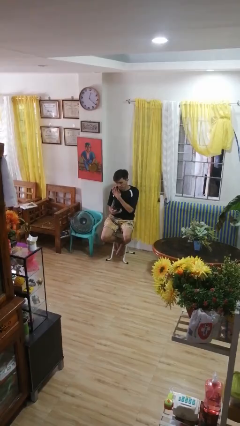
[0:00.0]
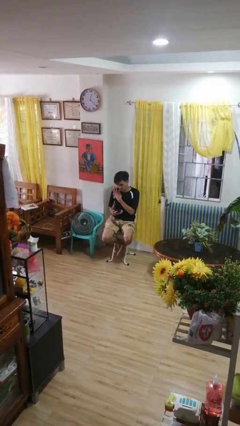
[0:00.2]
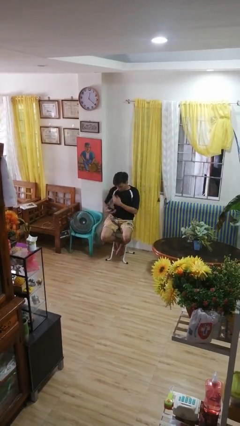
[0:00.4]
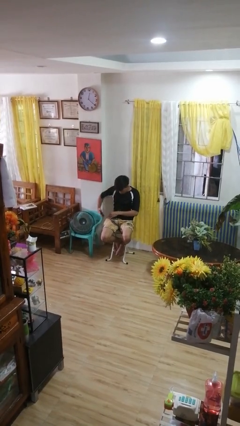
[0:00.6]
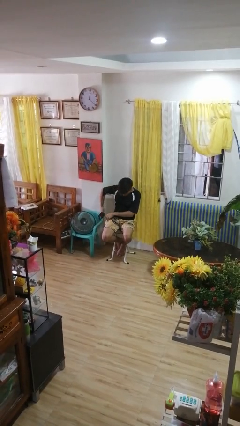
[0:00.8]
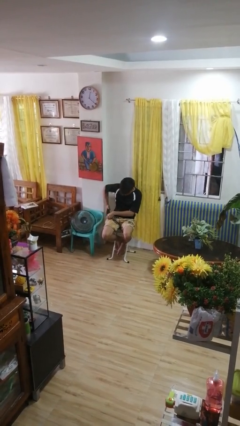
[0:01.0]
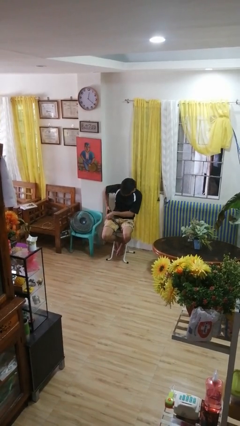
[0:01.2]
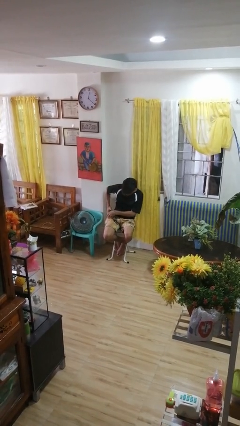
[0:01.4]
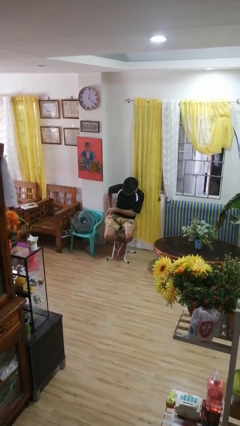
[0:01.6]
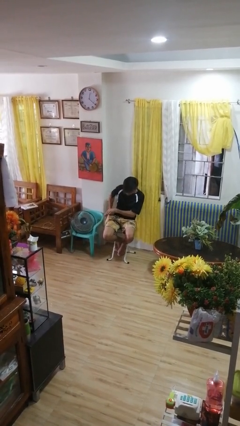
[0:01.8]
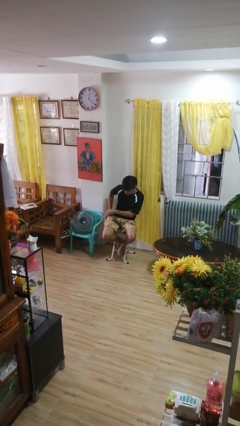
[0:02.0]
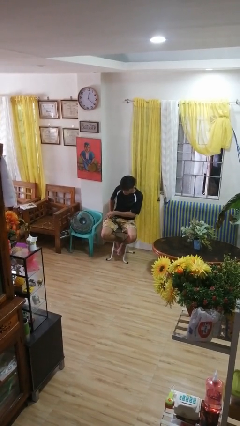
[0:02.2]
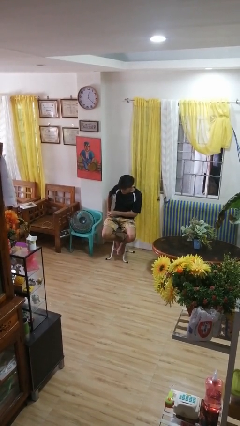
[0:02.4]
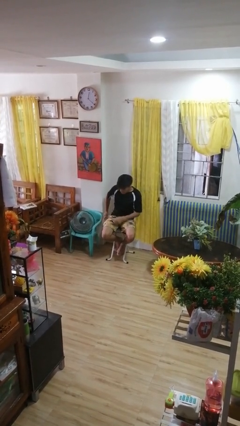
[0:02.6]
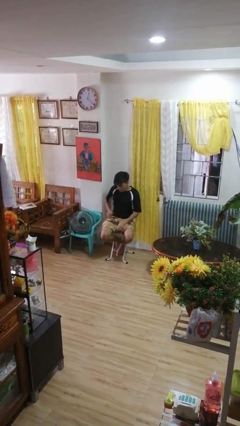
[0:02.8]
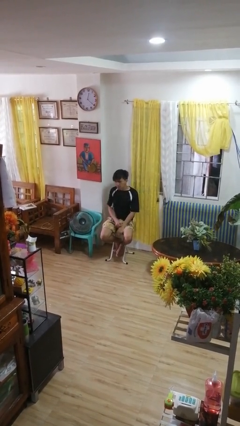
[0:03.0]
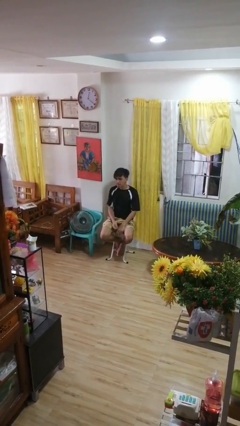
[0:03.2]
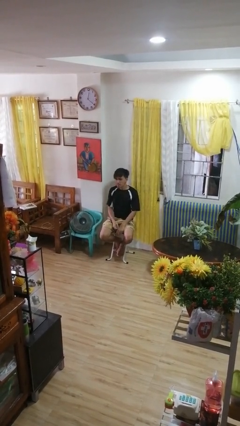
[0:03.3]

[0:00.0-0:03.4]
person puts phone into pocket

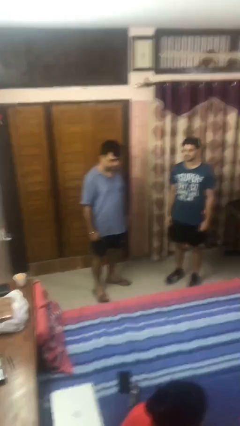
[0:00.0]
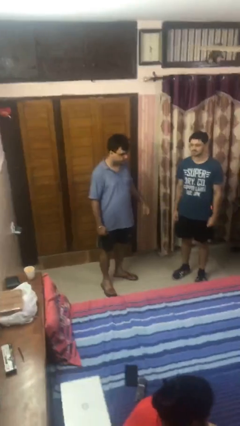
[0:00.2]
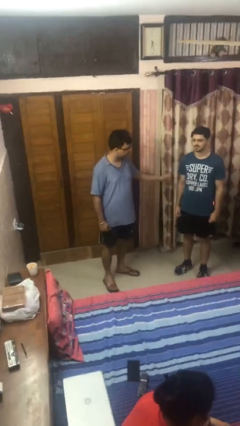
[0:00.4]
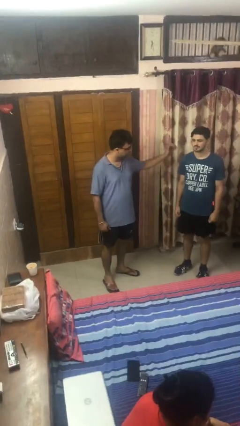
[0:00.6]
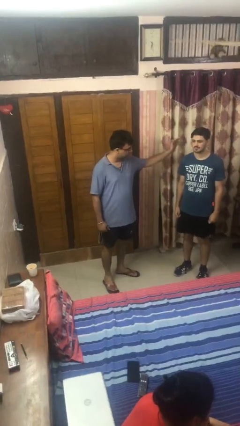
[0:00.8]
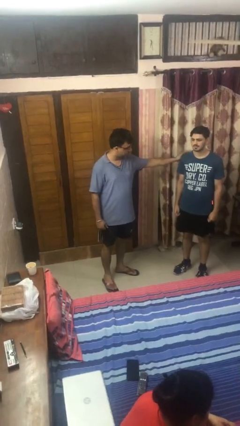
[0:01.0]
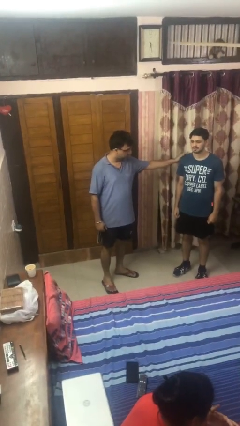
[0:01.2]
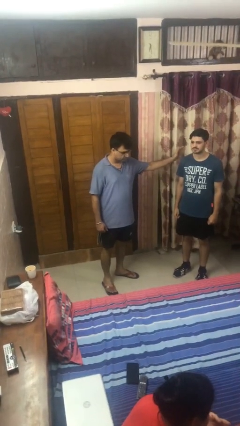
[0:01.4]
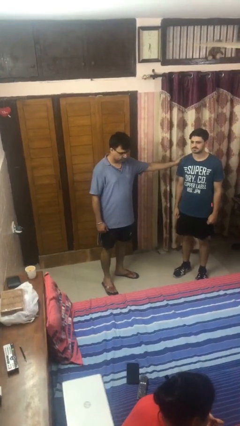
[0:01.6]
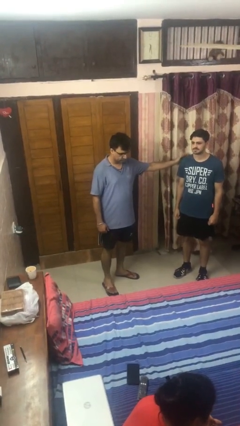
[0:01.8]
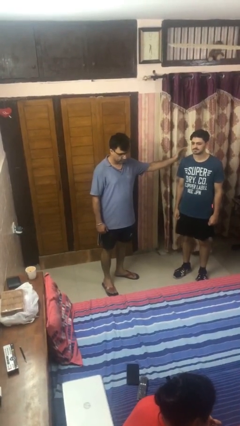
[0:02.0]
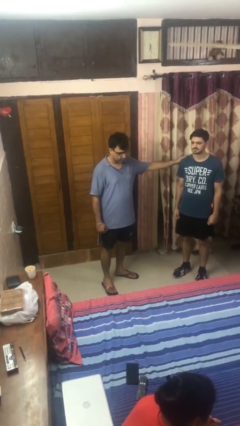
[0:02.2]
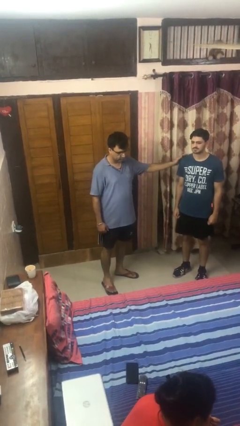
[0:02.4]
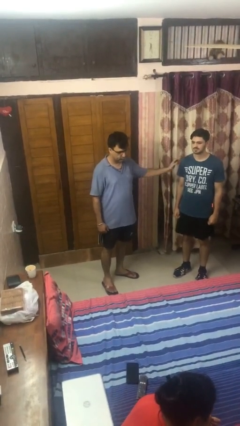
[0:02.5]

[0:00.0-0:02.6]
person pounds shoulders of person

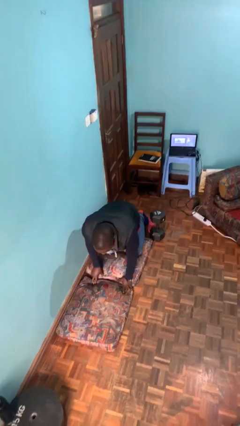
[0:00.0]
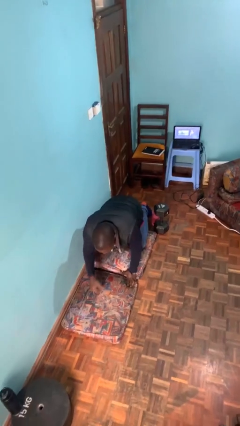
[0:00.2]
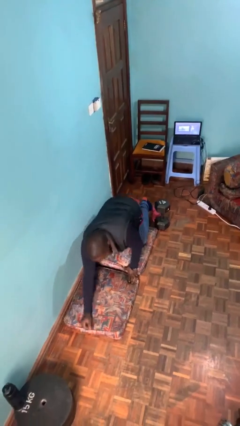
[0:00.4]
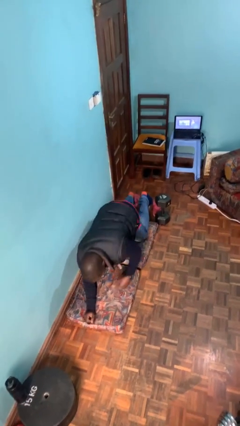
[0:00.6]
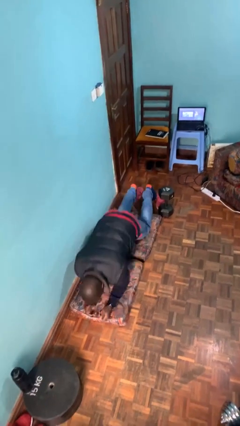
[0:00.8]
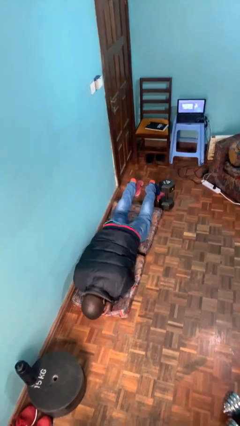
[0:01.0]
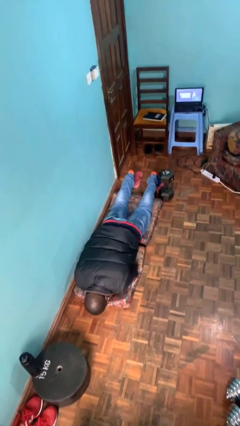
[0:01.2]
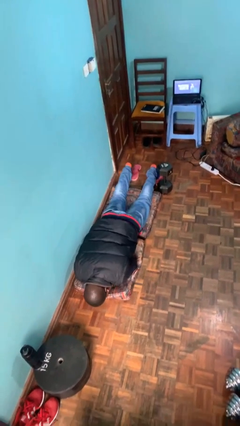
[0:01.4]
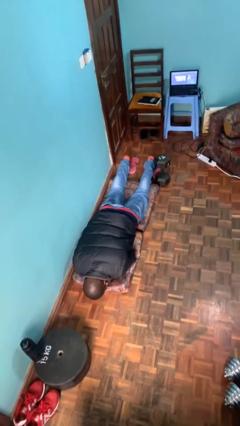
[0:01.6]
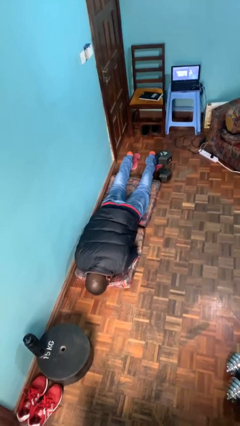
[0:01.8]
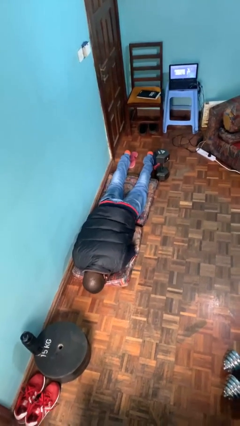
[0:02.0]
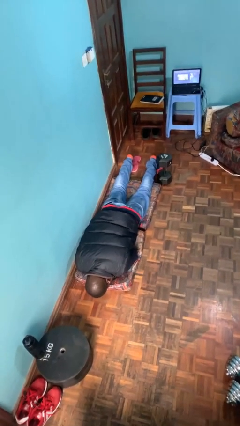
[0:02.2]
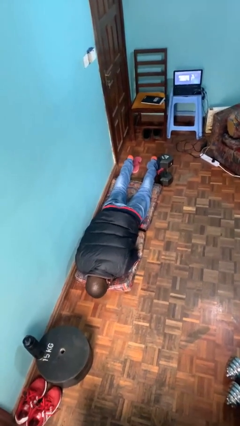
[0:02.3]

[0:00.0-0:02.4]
person lies down on floor

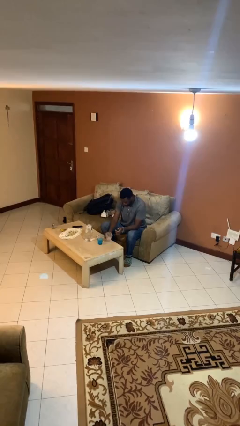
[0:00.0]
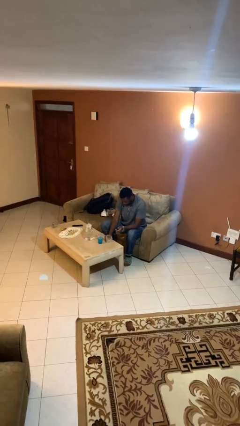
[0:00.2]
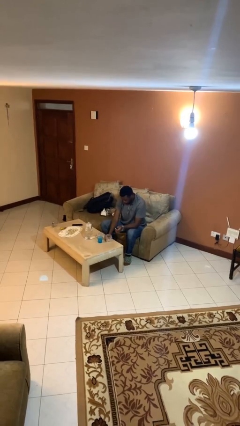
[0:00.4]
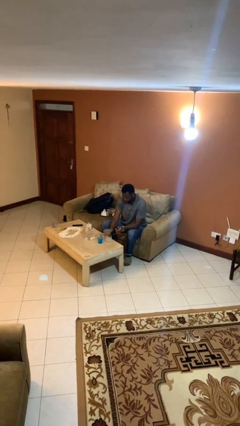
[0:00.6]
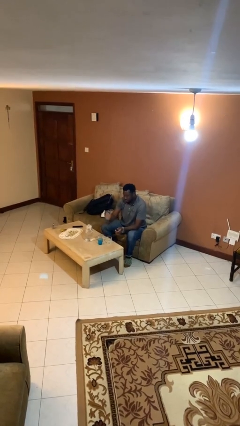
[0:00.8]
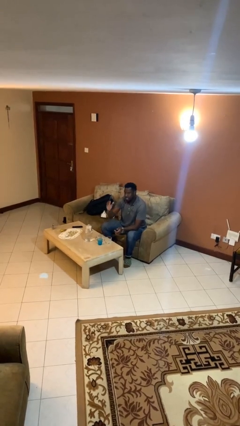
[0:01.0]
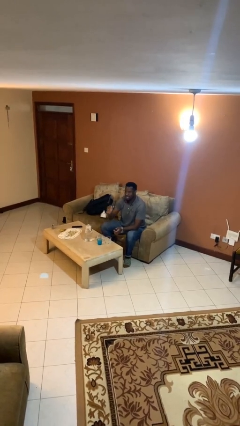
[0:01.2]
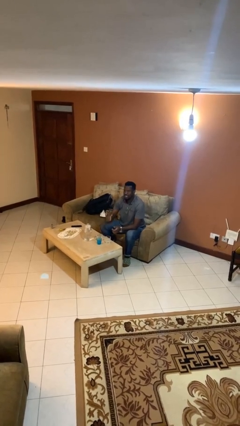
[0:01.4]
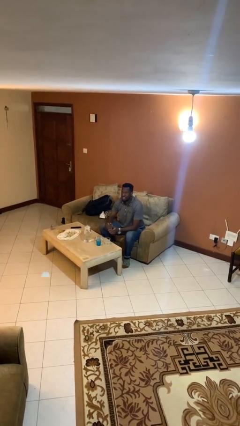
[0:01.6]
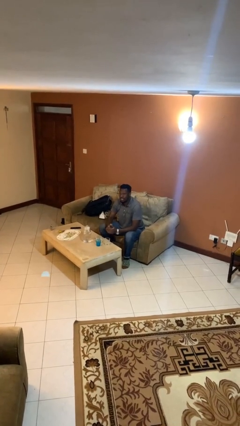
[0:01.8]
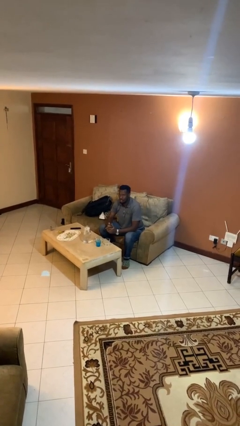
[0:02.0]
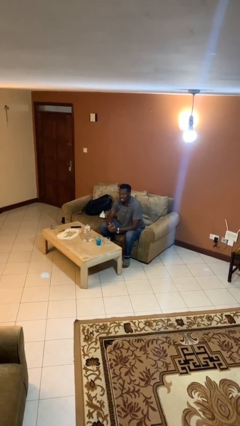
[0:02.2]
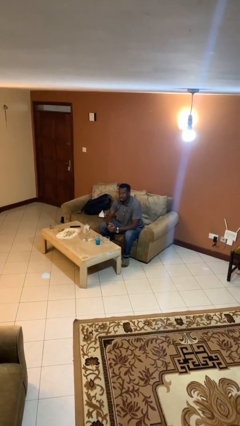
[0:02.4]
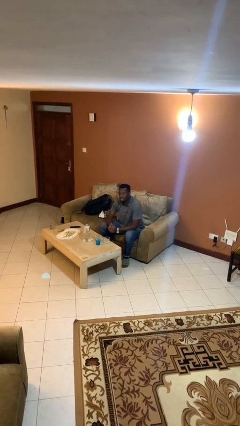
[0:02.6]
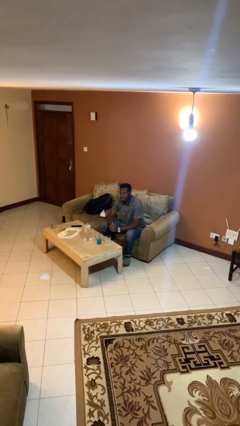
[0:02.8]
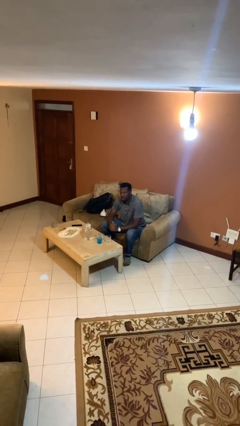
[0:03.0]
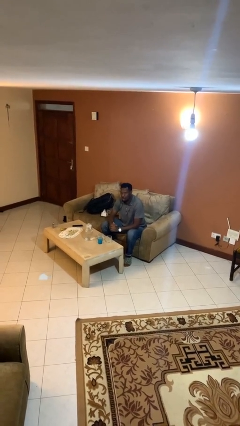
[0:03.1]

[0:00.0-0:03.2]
person puts down object on table

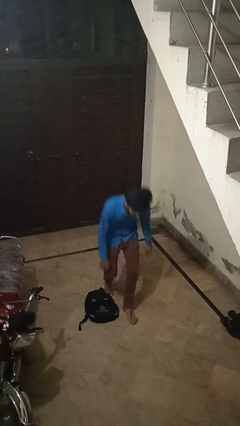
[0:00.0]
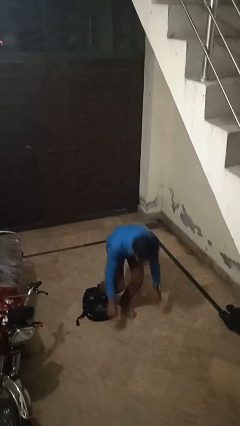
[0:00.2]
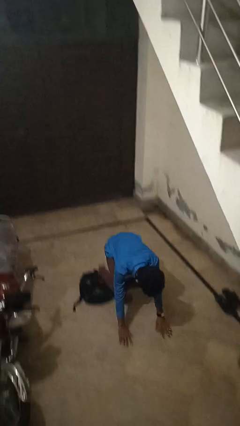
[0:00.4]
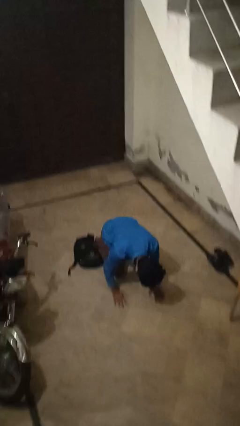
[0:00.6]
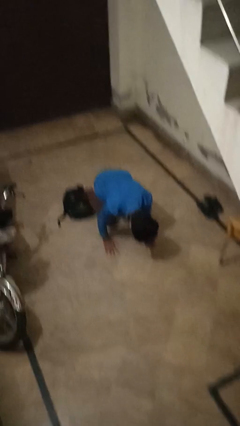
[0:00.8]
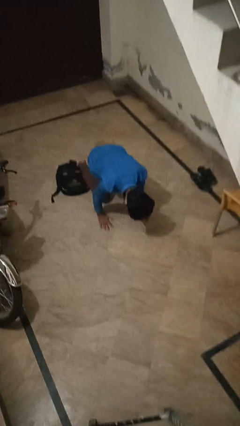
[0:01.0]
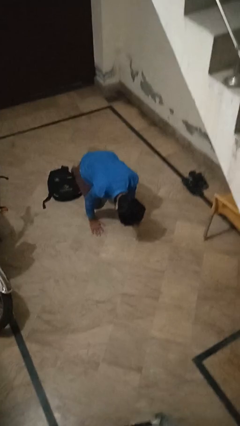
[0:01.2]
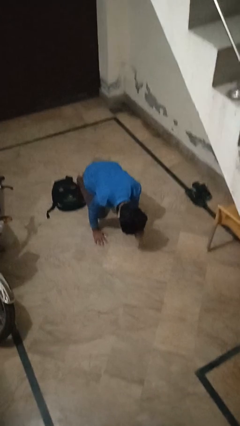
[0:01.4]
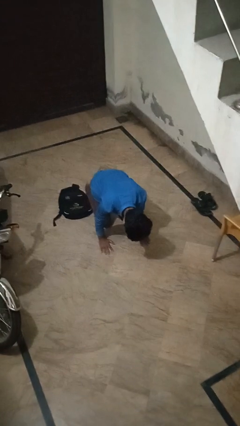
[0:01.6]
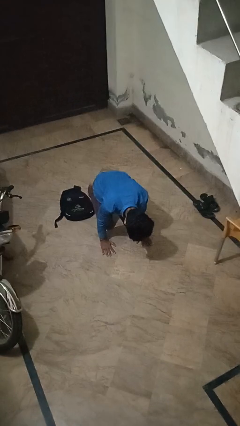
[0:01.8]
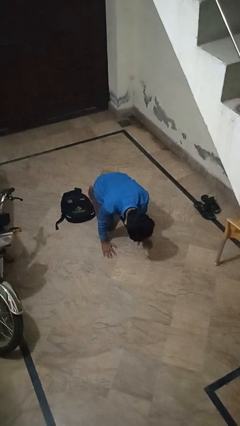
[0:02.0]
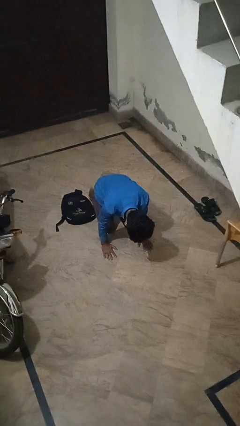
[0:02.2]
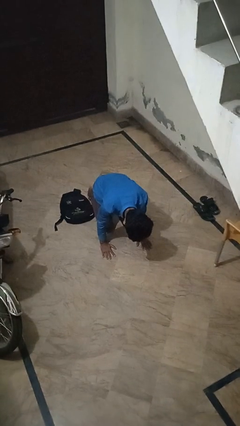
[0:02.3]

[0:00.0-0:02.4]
person trips on object on floor

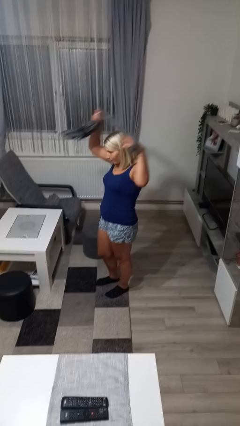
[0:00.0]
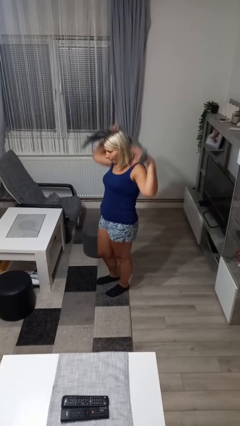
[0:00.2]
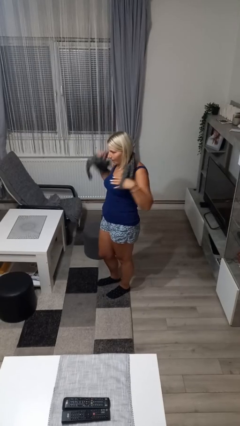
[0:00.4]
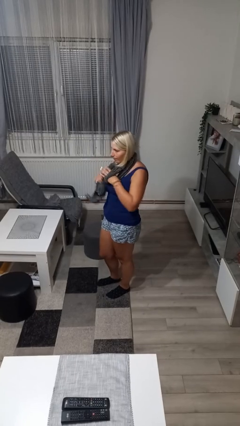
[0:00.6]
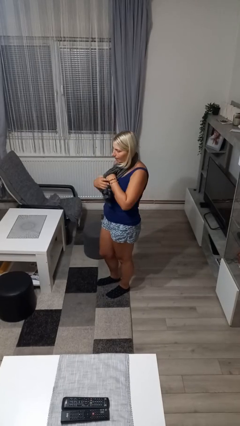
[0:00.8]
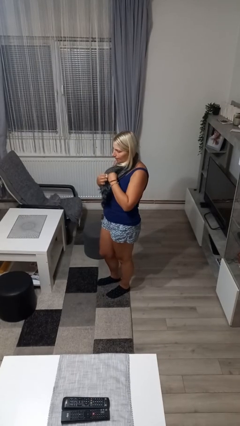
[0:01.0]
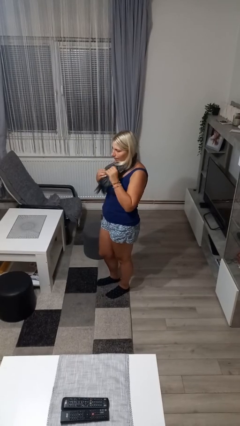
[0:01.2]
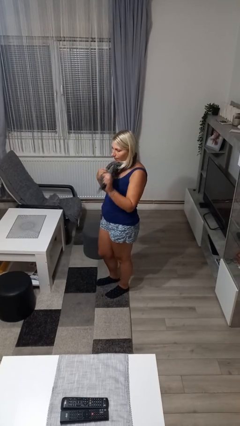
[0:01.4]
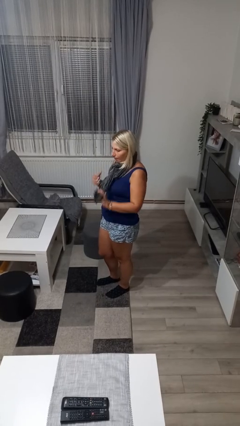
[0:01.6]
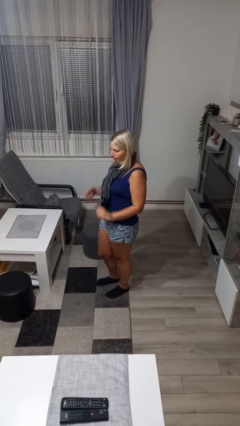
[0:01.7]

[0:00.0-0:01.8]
person puts on scarf

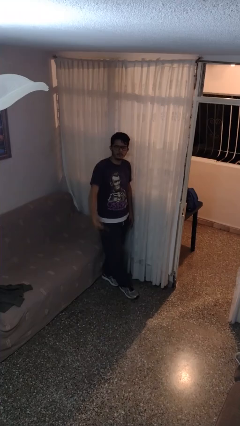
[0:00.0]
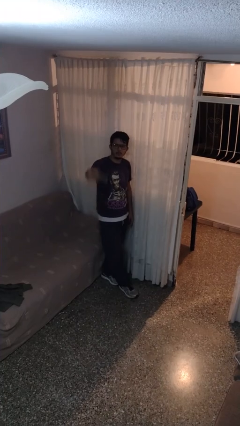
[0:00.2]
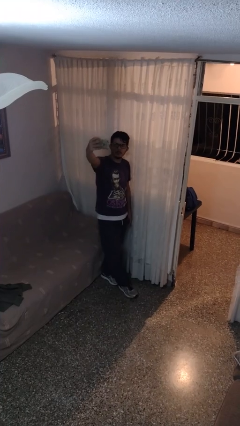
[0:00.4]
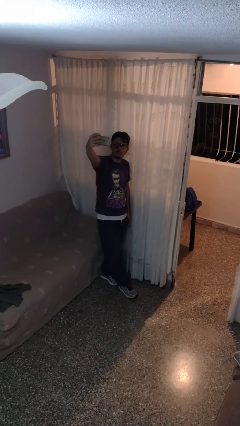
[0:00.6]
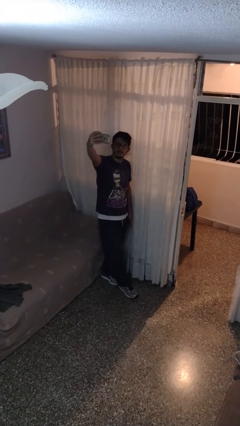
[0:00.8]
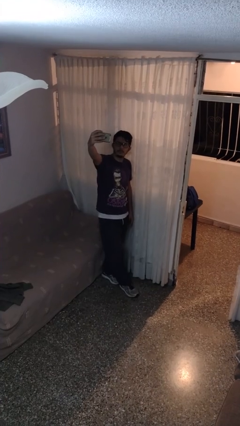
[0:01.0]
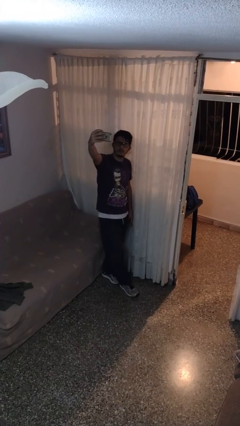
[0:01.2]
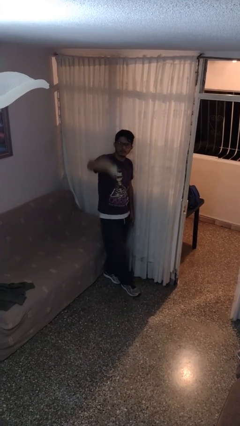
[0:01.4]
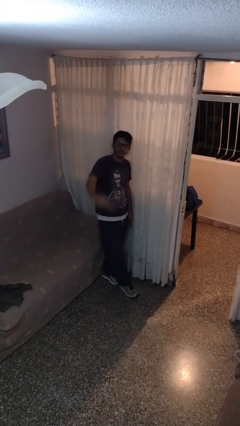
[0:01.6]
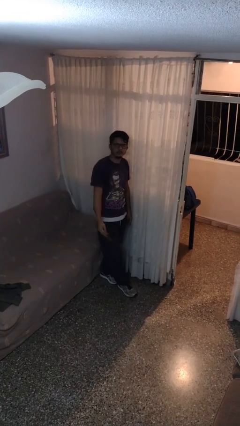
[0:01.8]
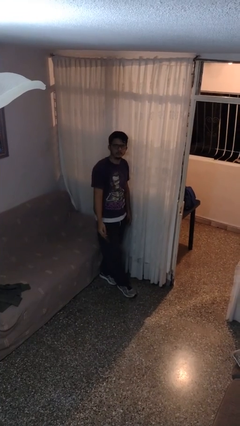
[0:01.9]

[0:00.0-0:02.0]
person takes selfie
